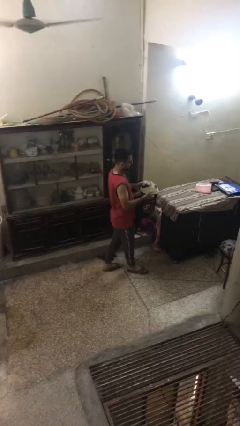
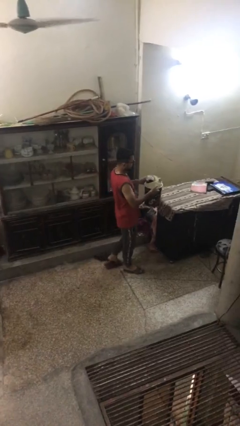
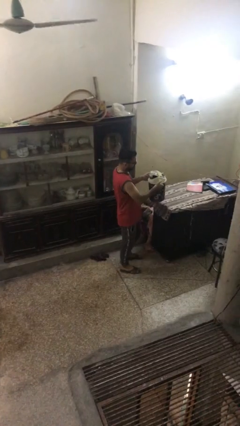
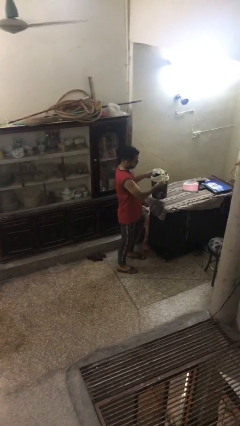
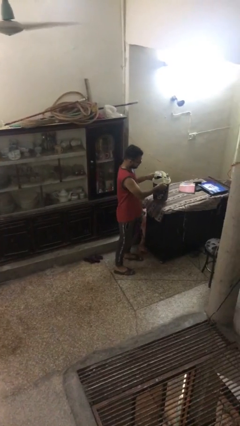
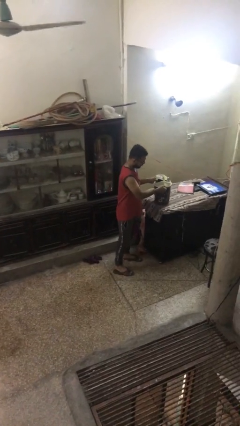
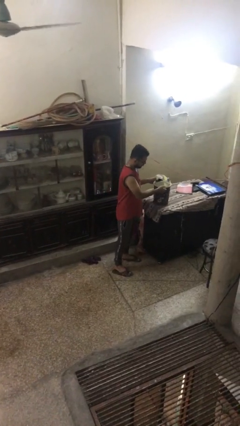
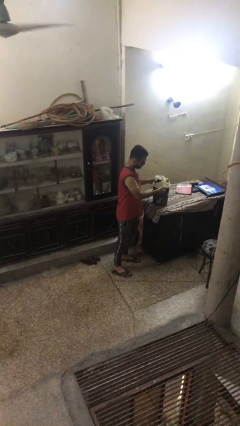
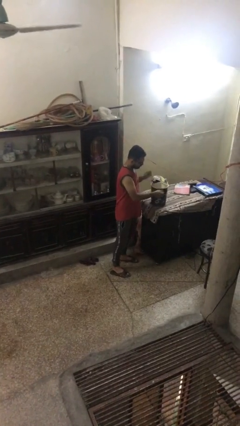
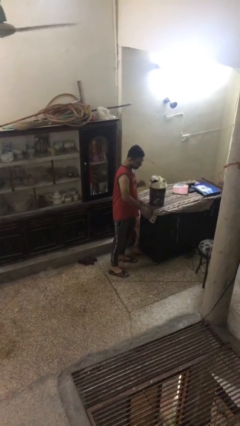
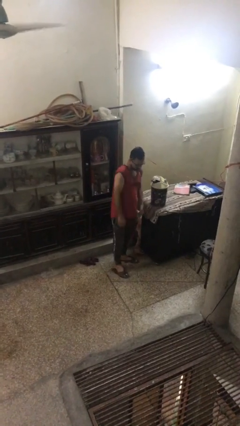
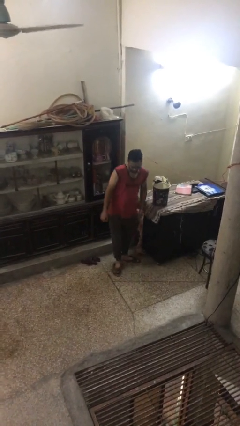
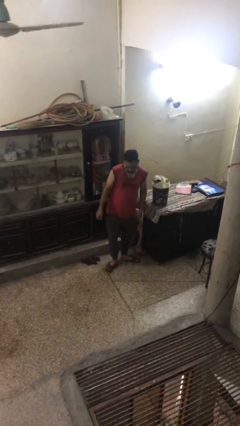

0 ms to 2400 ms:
person puts down object on table

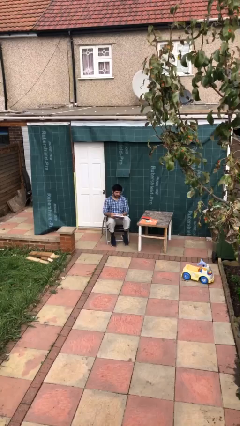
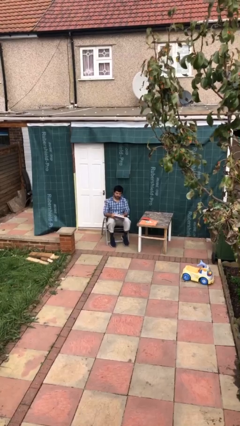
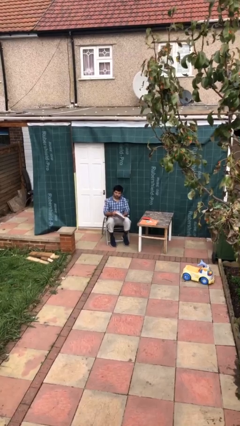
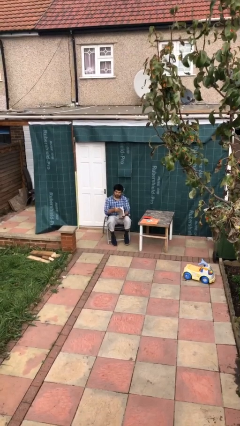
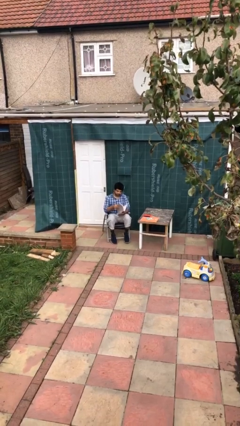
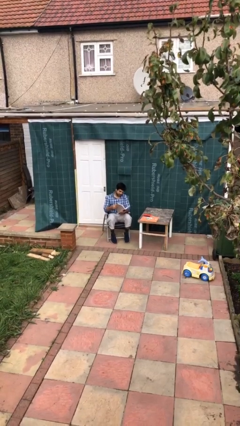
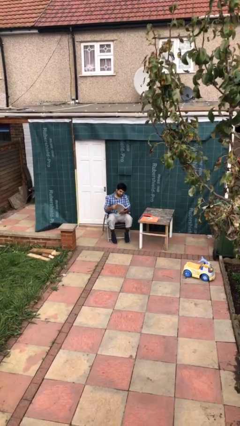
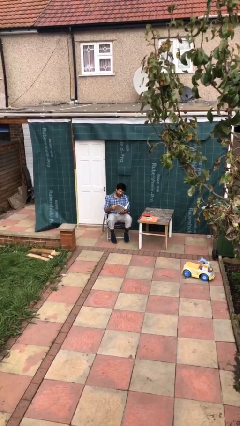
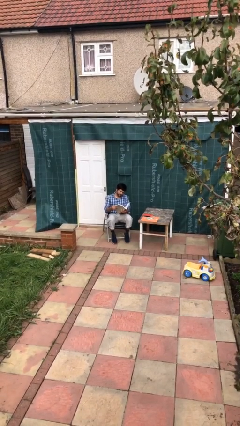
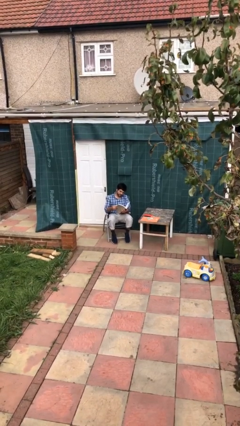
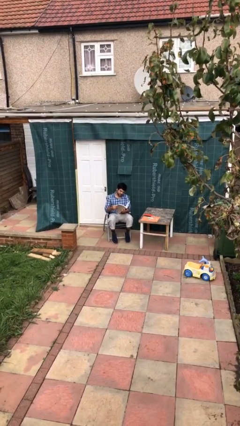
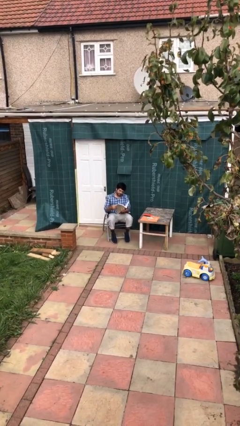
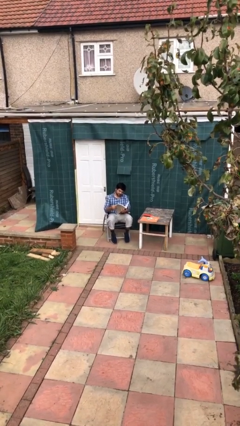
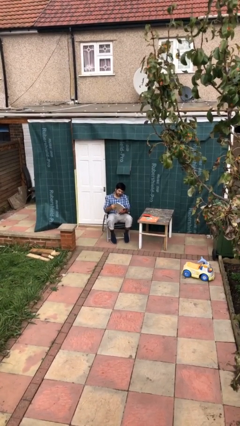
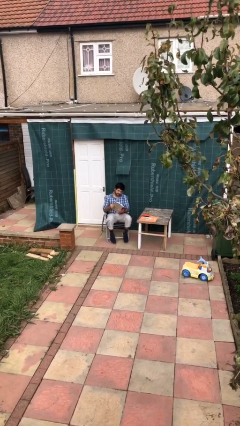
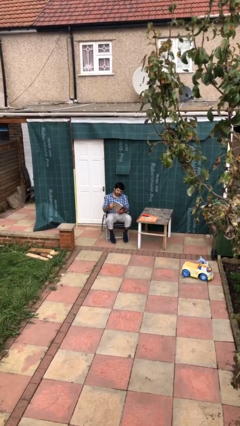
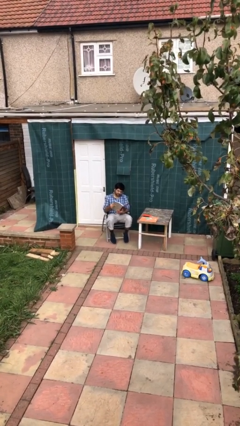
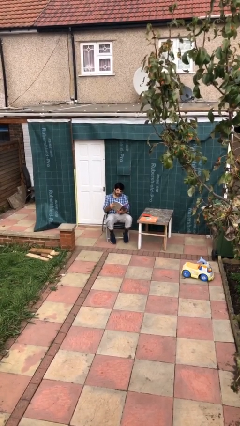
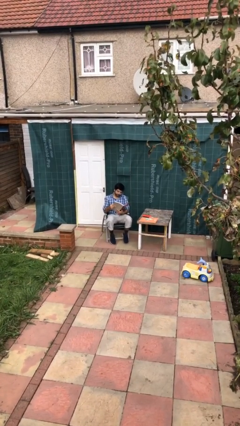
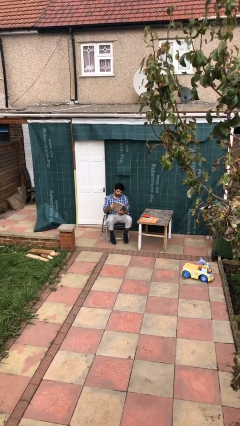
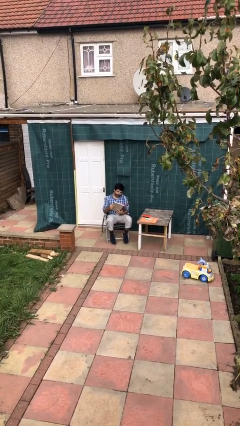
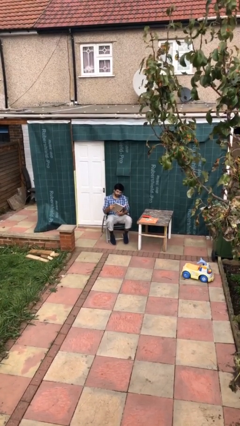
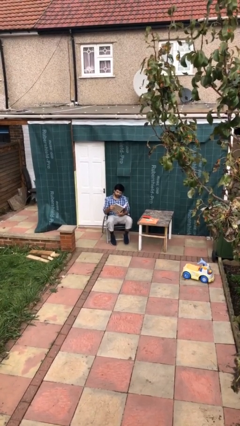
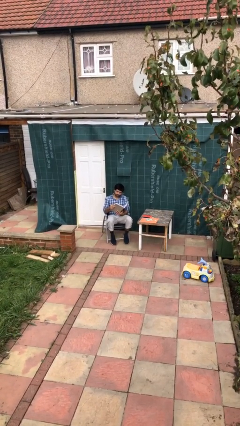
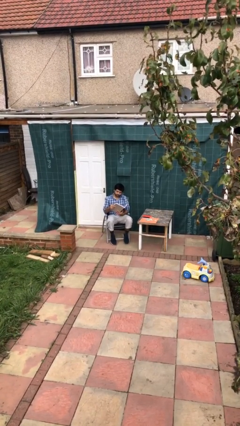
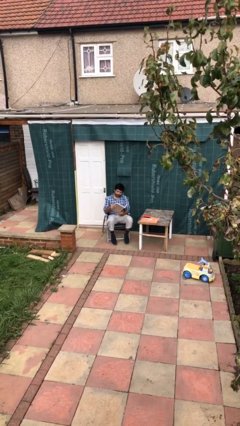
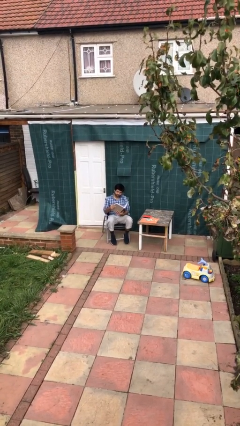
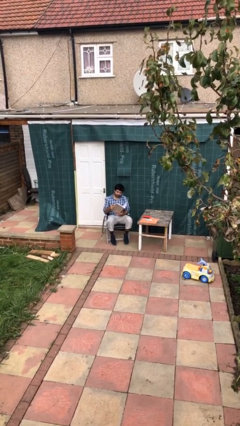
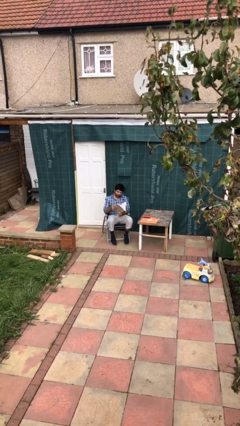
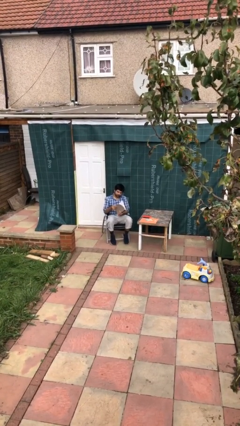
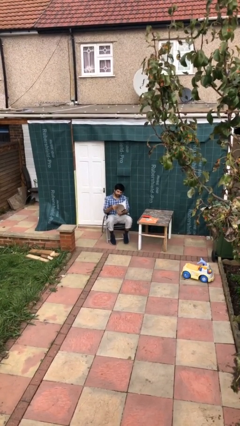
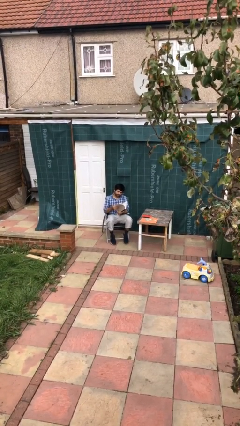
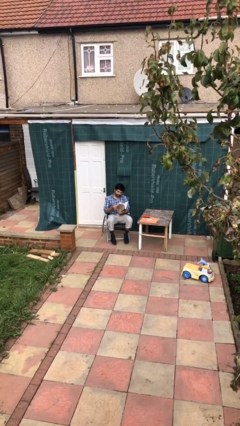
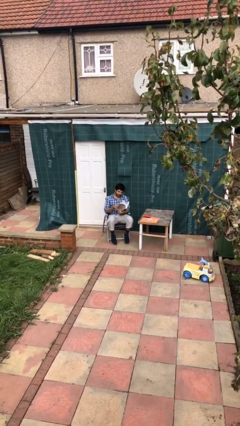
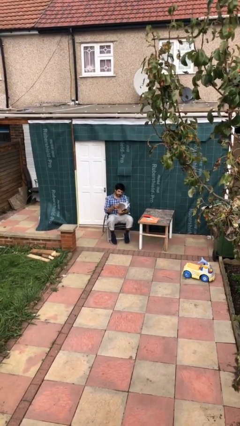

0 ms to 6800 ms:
person reads document

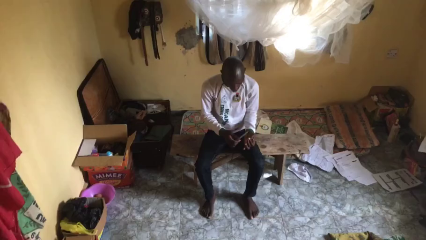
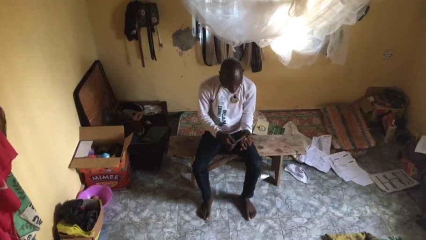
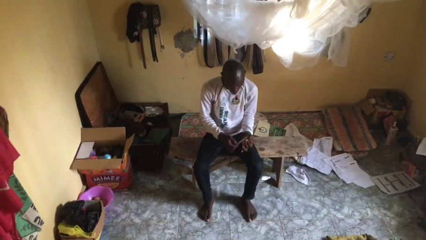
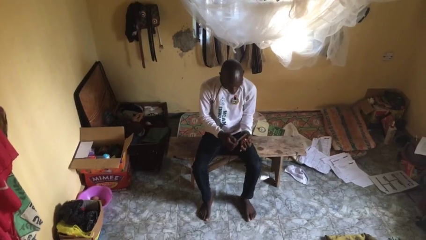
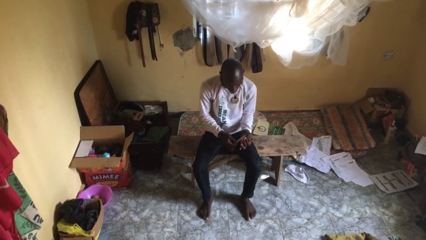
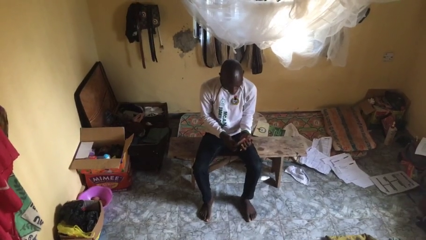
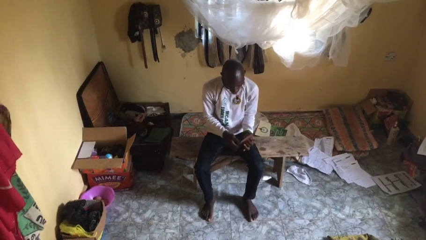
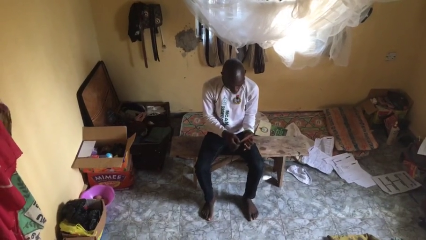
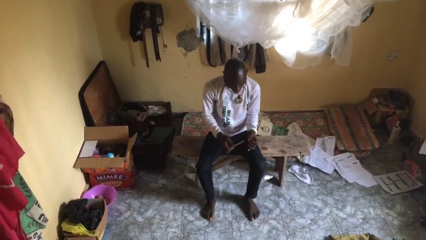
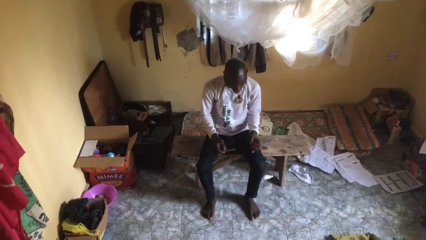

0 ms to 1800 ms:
person files fingernails

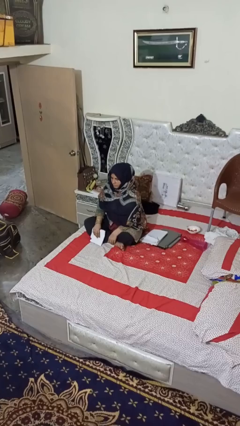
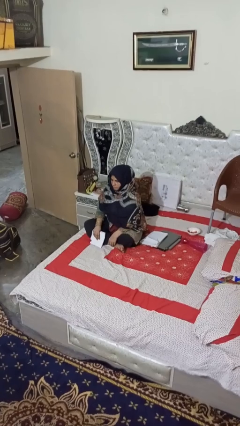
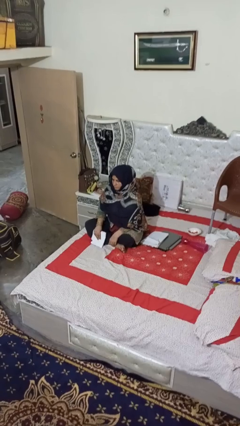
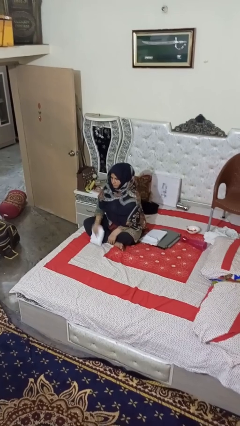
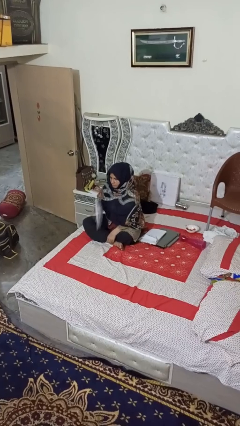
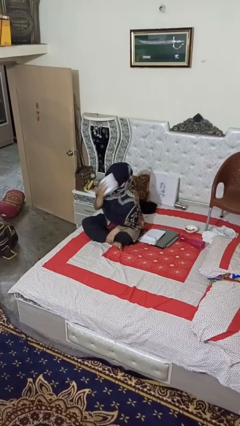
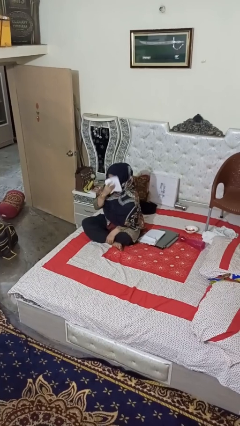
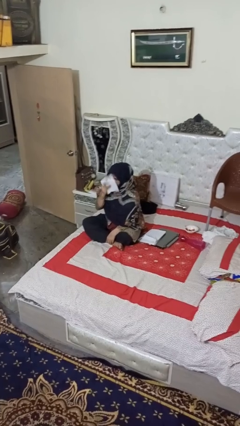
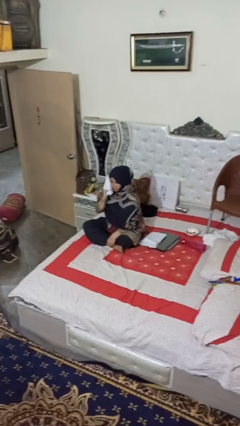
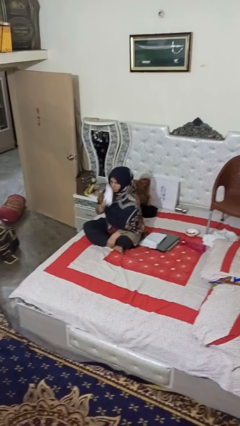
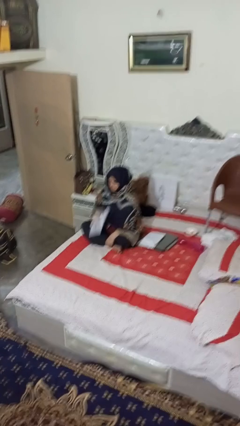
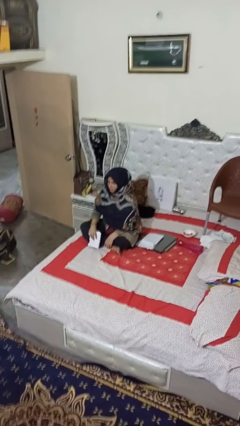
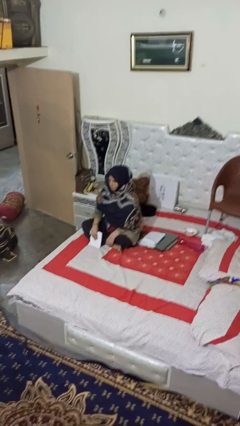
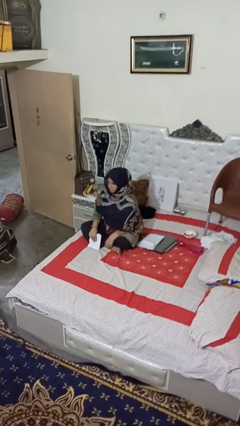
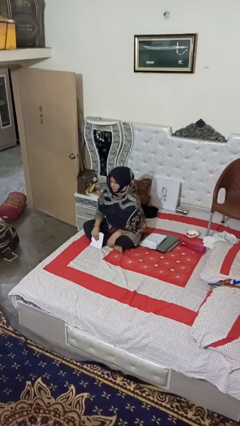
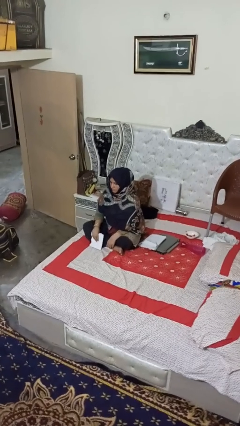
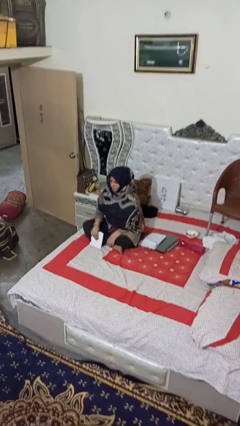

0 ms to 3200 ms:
person wipes mouth with napkin

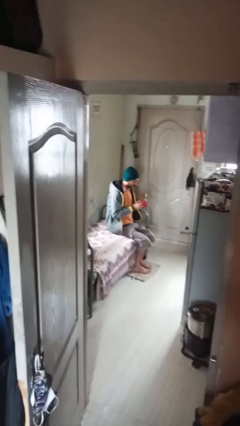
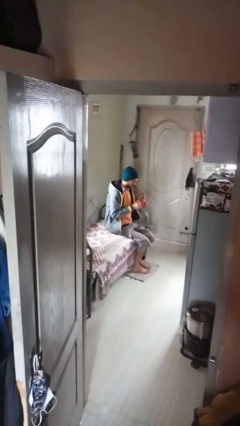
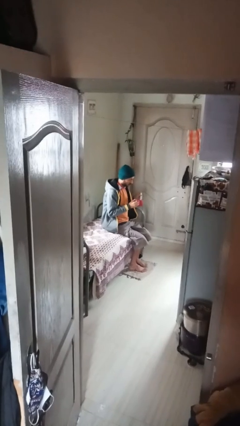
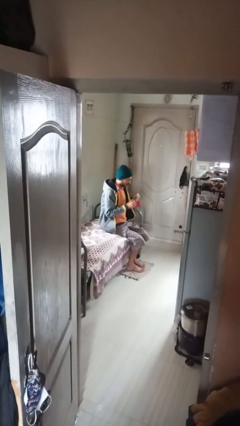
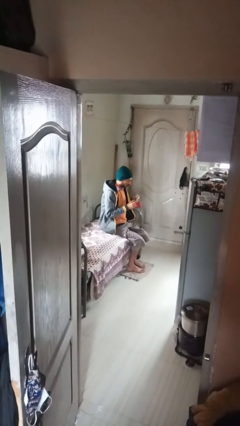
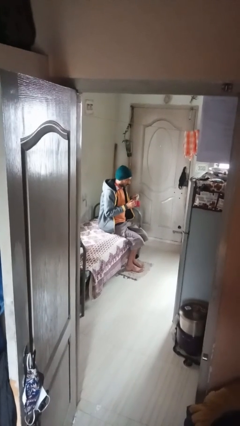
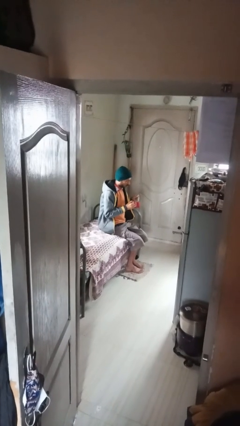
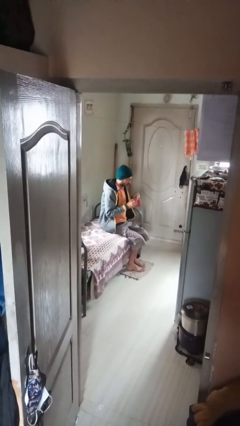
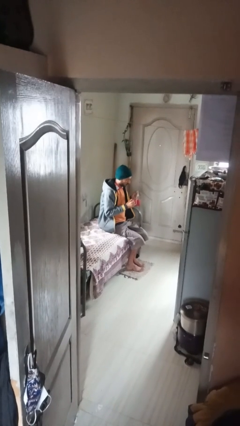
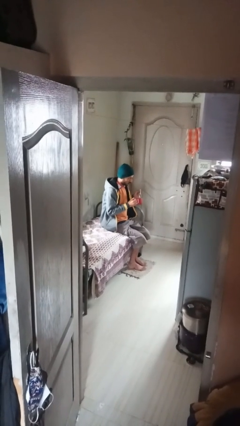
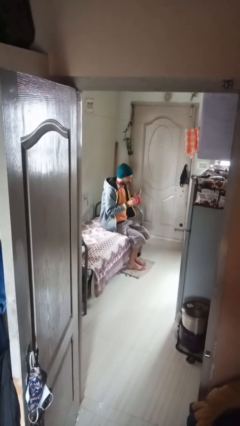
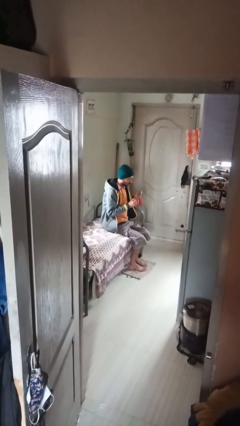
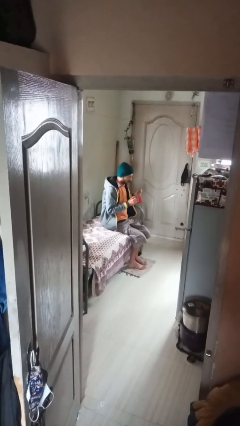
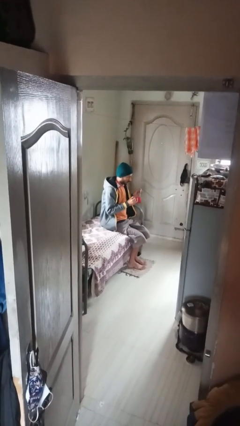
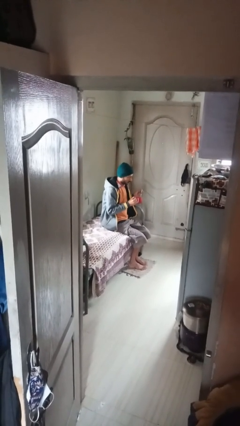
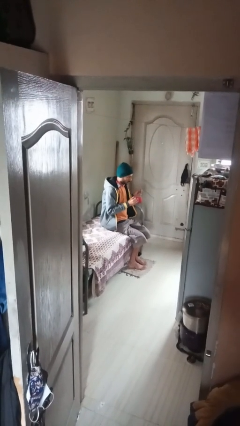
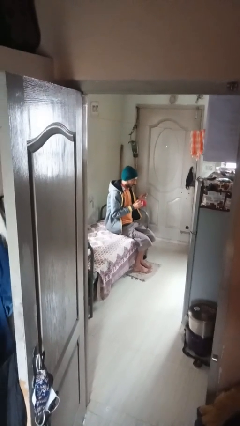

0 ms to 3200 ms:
person stirs mug

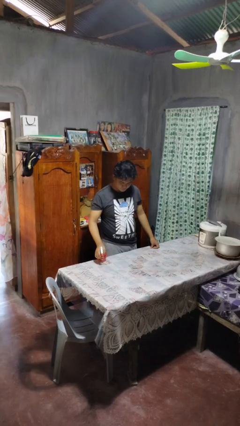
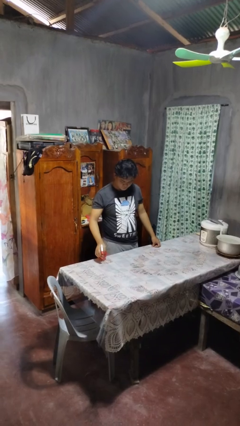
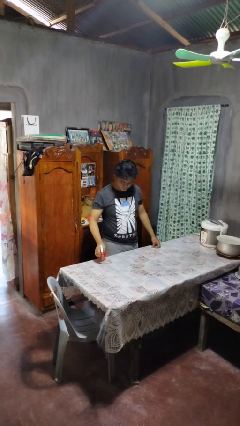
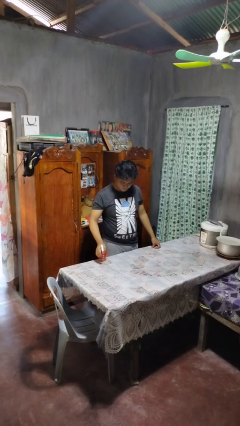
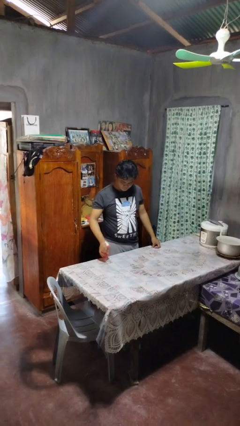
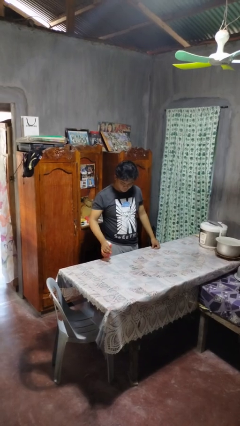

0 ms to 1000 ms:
person sprays from bottle
